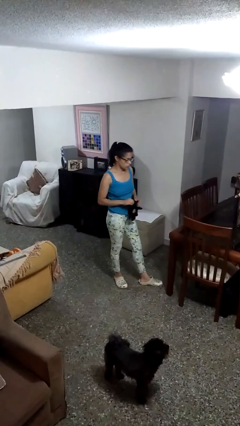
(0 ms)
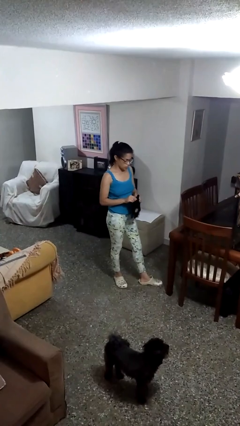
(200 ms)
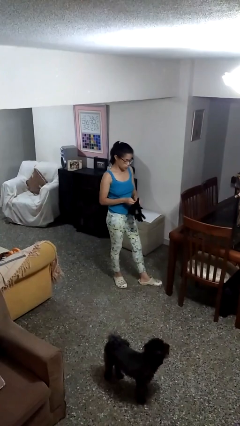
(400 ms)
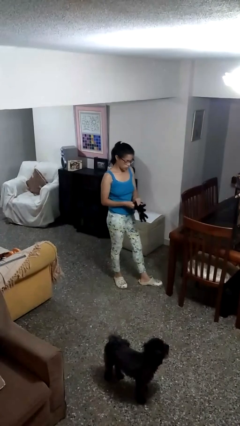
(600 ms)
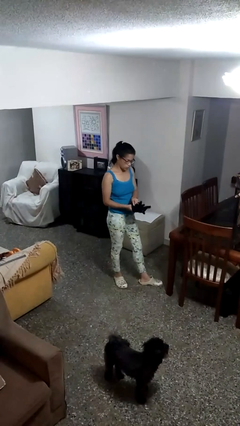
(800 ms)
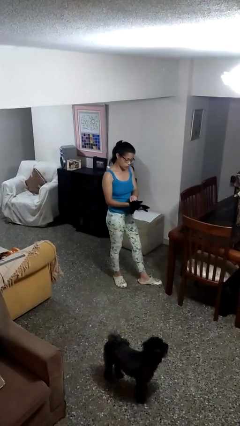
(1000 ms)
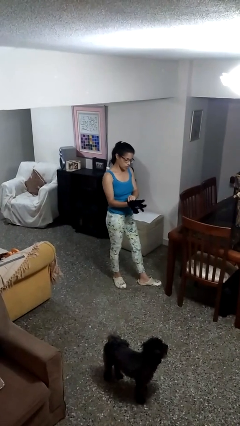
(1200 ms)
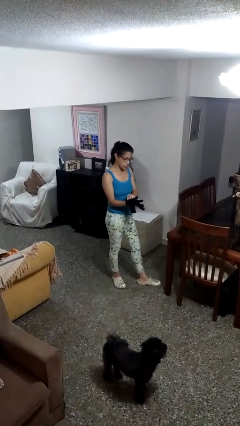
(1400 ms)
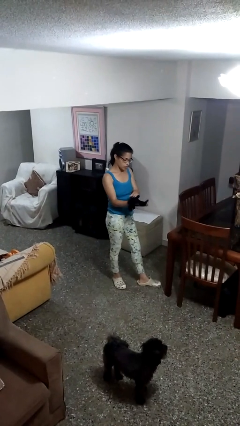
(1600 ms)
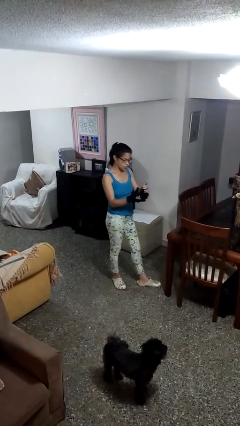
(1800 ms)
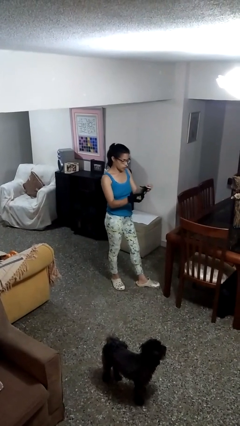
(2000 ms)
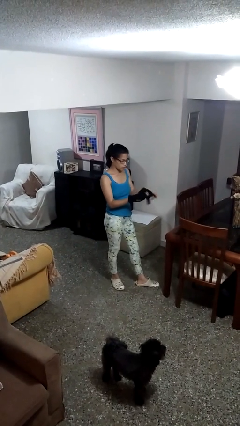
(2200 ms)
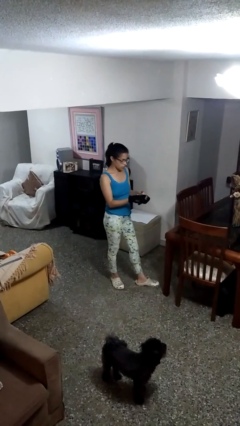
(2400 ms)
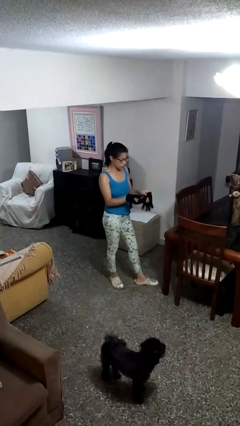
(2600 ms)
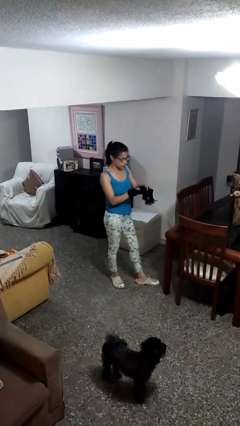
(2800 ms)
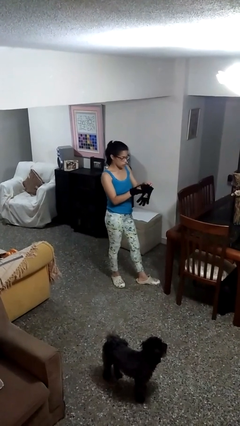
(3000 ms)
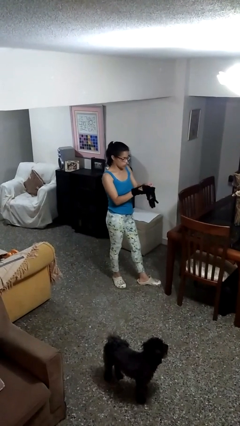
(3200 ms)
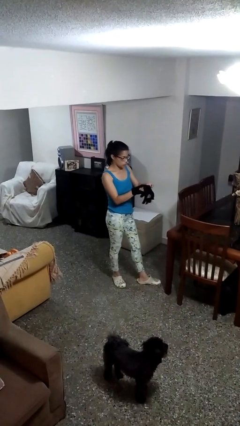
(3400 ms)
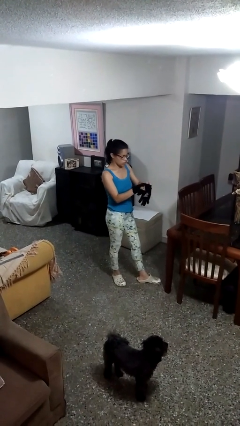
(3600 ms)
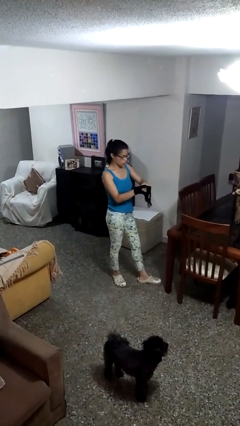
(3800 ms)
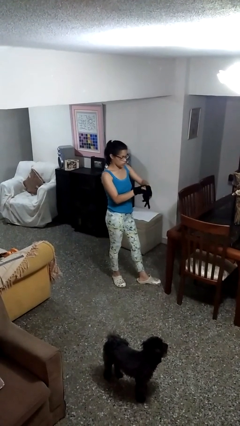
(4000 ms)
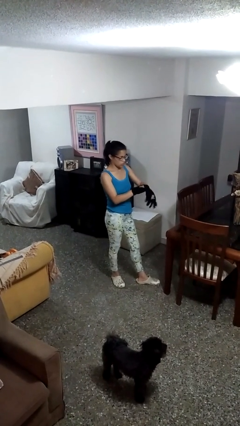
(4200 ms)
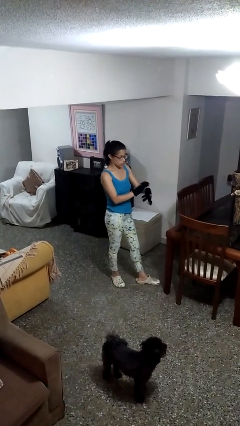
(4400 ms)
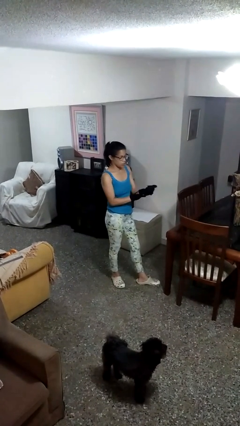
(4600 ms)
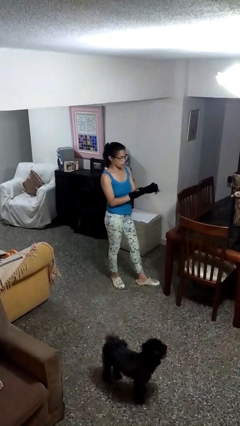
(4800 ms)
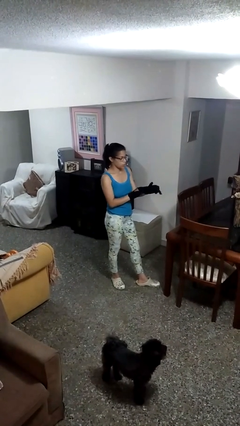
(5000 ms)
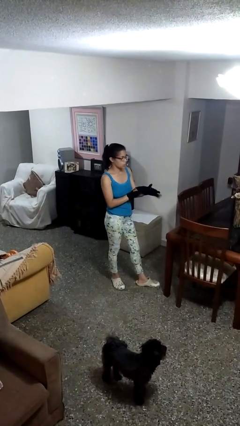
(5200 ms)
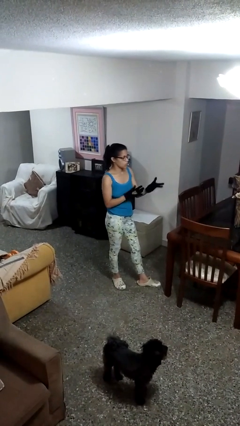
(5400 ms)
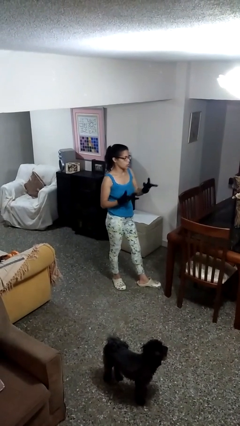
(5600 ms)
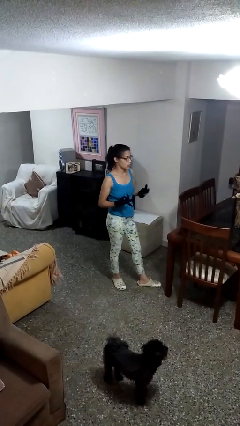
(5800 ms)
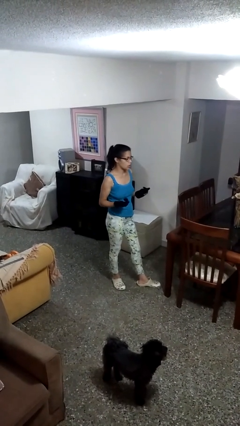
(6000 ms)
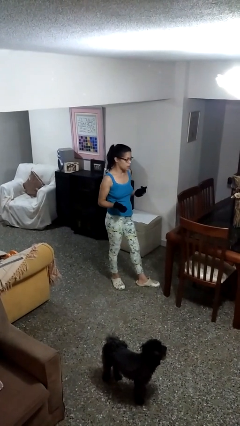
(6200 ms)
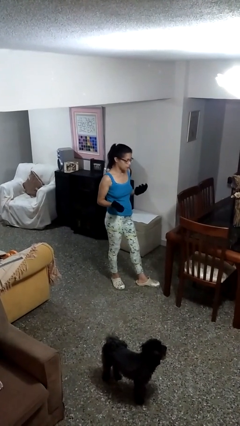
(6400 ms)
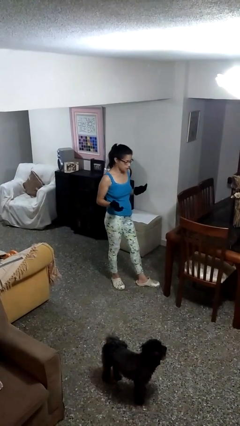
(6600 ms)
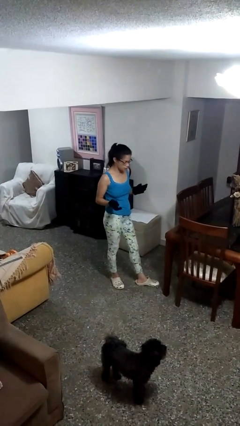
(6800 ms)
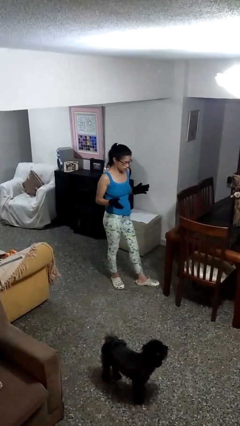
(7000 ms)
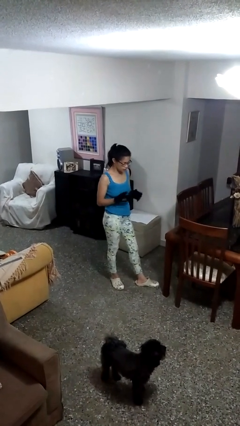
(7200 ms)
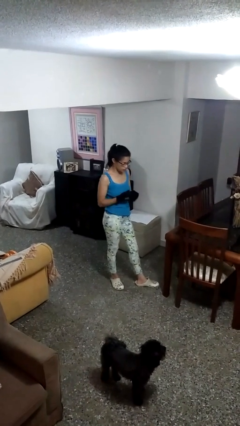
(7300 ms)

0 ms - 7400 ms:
person puts on gloves

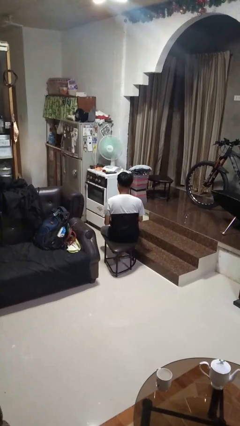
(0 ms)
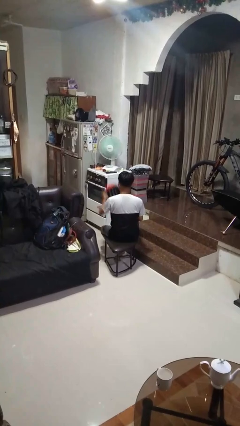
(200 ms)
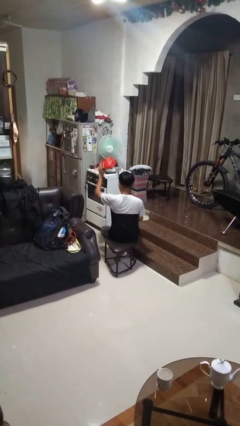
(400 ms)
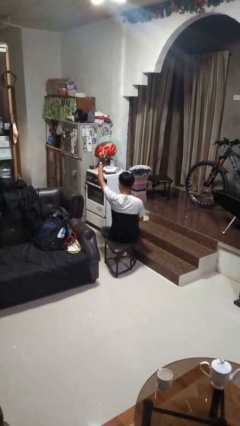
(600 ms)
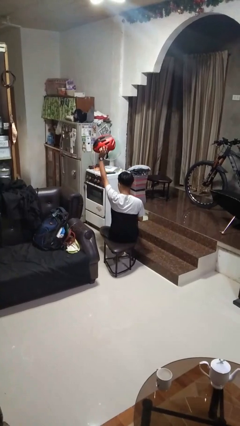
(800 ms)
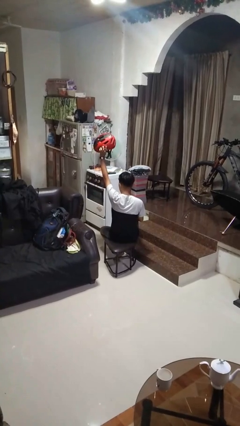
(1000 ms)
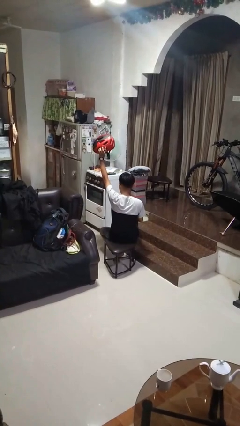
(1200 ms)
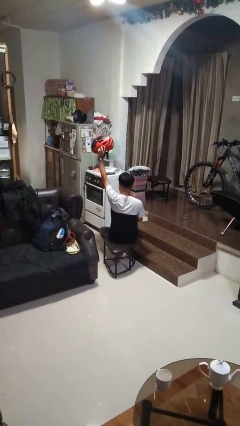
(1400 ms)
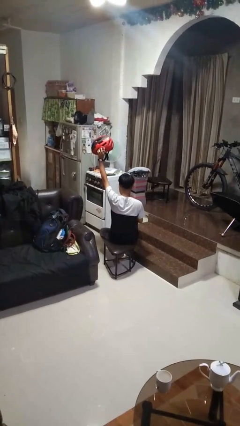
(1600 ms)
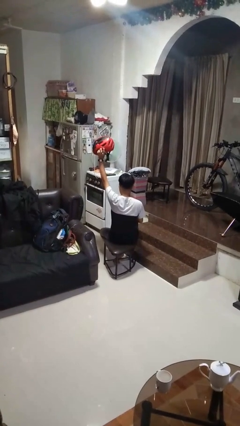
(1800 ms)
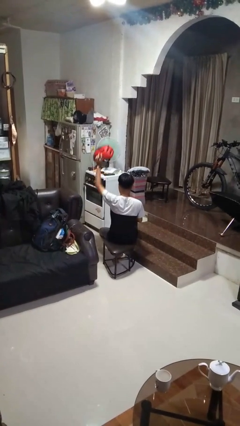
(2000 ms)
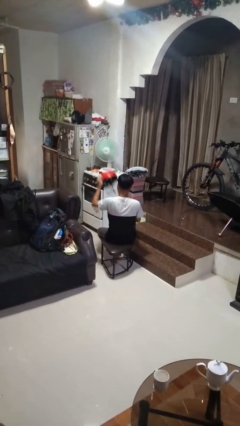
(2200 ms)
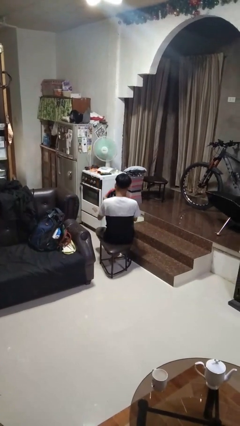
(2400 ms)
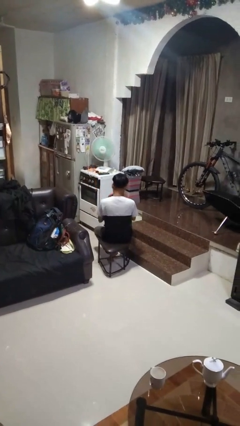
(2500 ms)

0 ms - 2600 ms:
person holds object above head

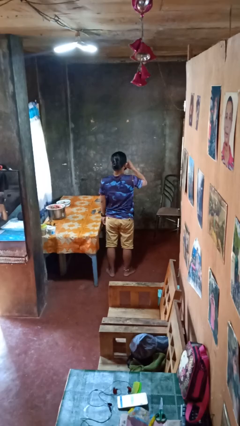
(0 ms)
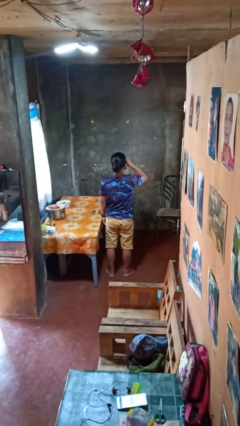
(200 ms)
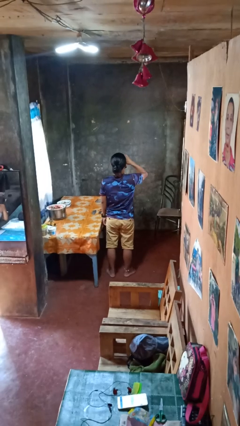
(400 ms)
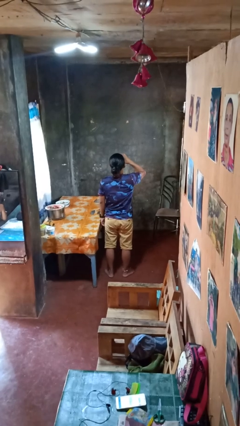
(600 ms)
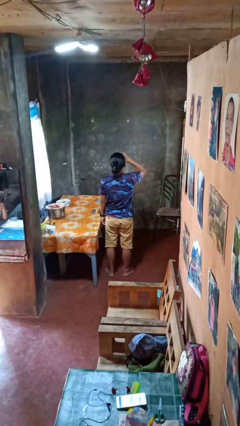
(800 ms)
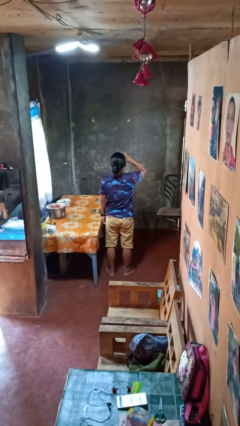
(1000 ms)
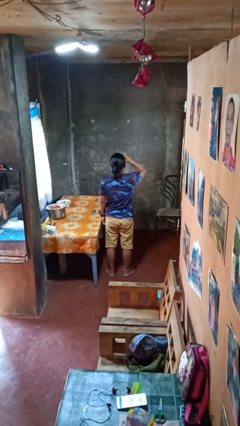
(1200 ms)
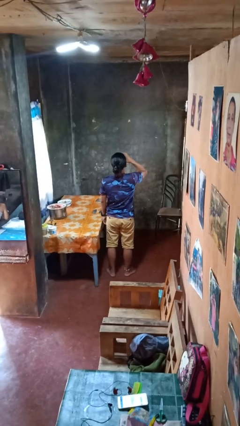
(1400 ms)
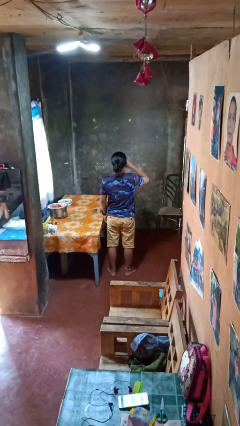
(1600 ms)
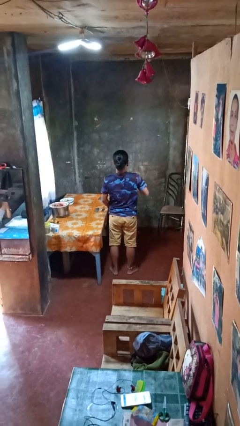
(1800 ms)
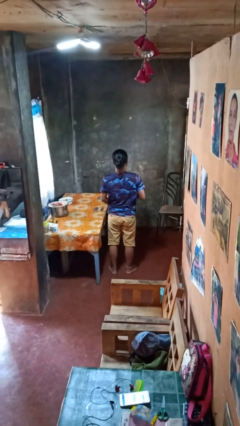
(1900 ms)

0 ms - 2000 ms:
person drinks from beverage can

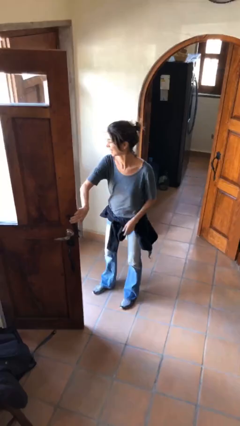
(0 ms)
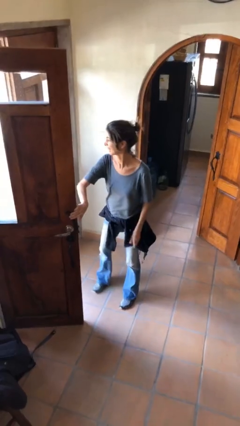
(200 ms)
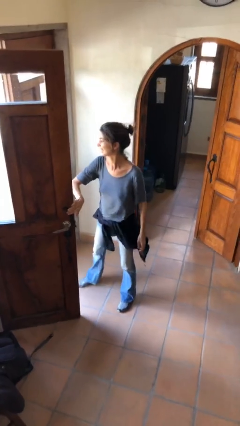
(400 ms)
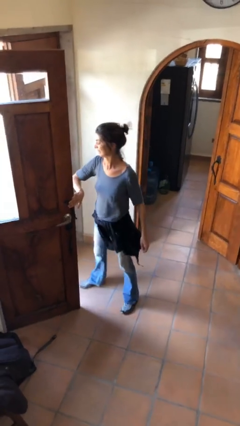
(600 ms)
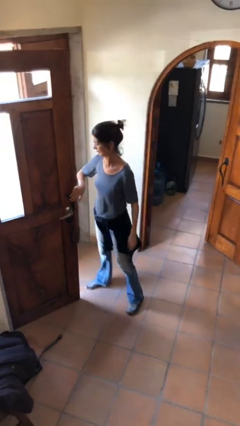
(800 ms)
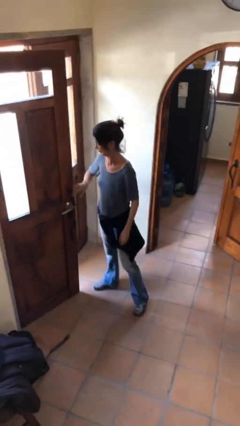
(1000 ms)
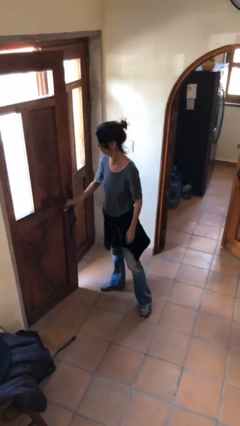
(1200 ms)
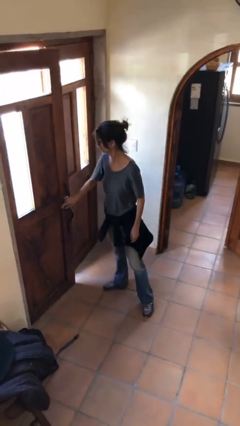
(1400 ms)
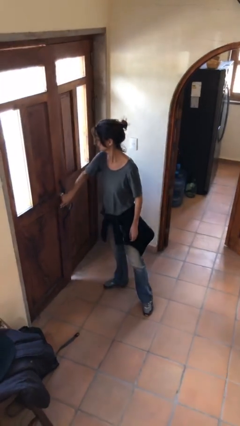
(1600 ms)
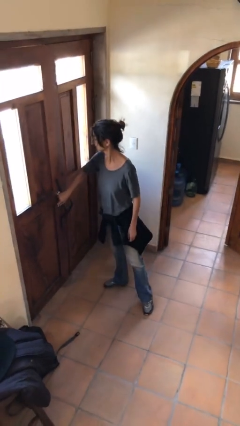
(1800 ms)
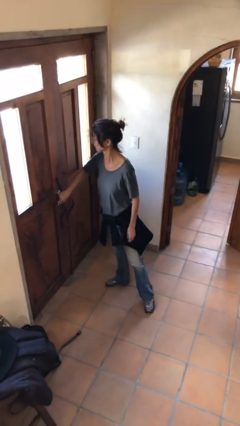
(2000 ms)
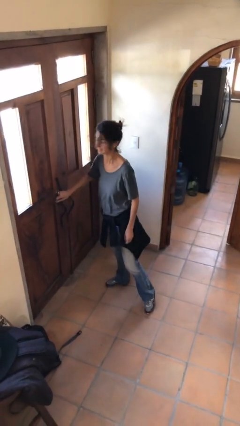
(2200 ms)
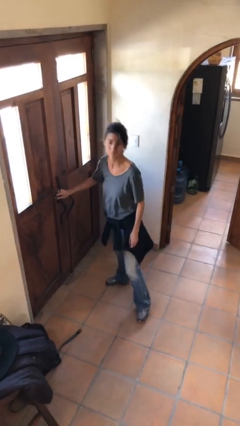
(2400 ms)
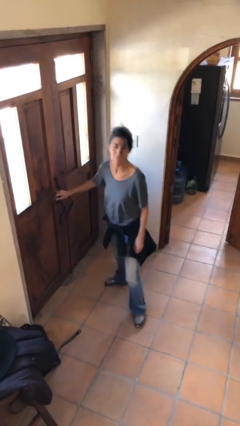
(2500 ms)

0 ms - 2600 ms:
person closes facility door

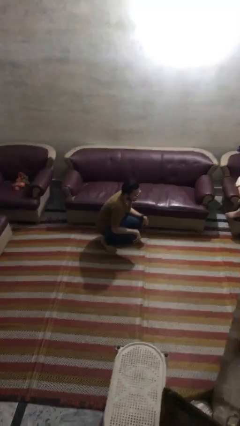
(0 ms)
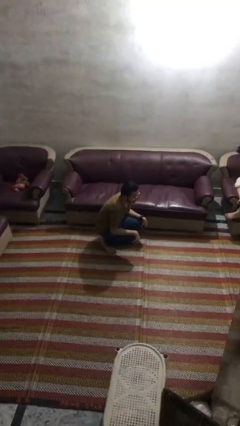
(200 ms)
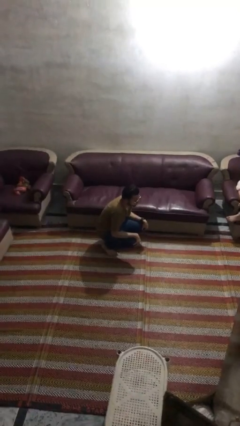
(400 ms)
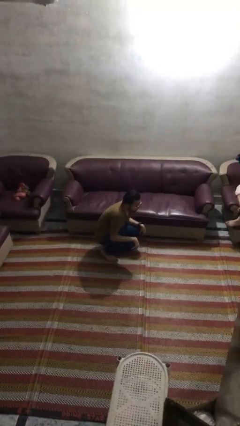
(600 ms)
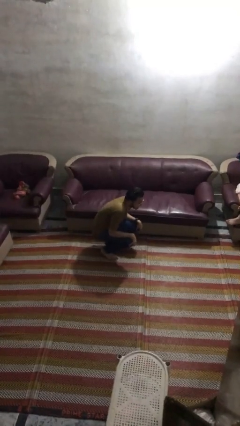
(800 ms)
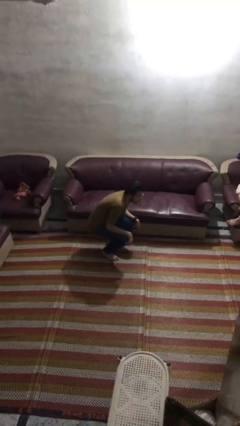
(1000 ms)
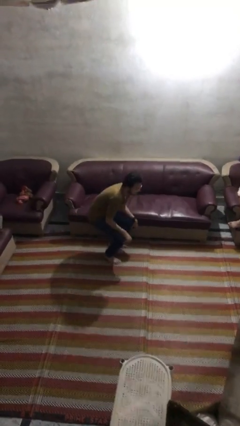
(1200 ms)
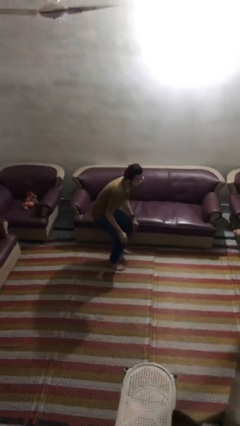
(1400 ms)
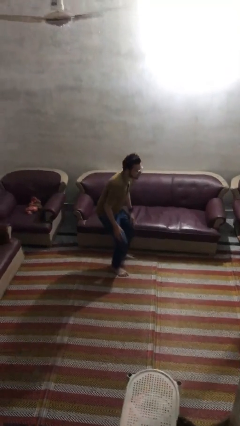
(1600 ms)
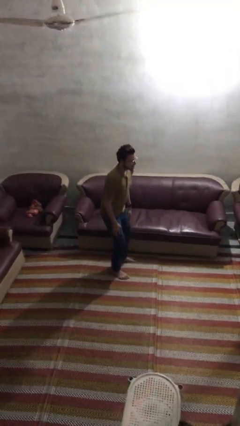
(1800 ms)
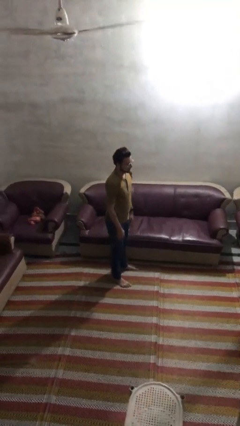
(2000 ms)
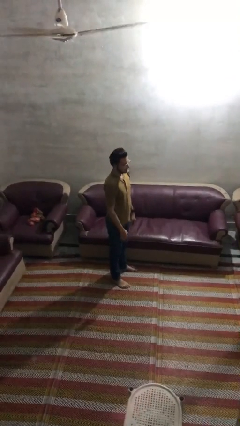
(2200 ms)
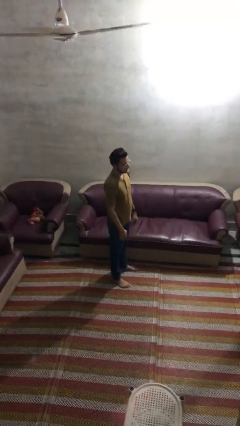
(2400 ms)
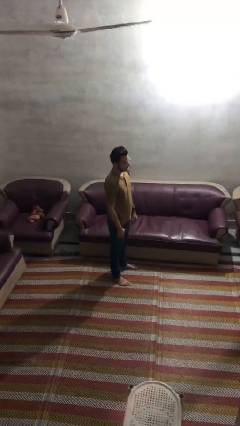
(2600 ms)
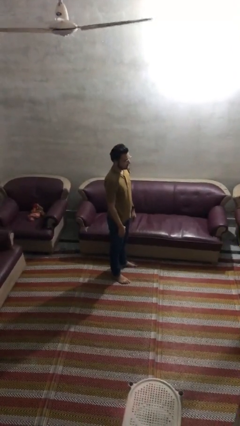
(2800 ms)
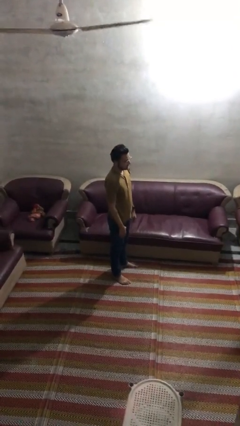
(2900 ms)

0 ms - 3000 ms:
person stands up
